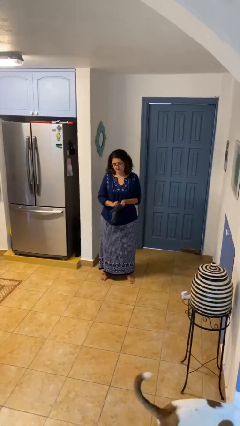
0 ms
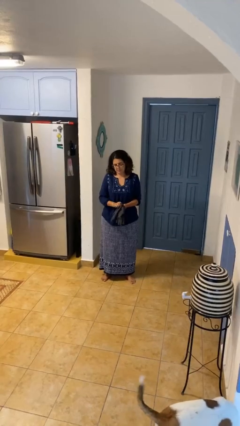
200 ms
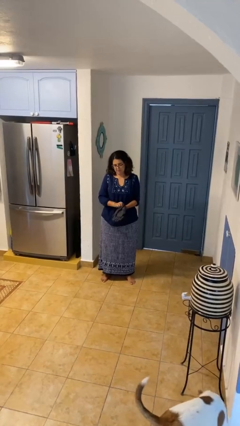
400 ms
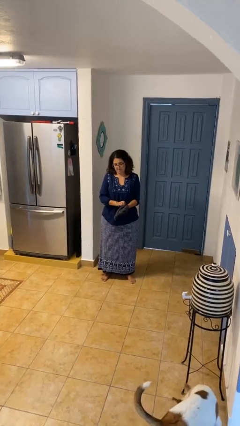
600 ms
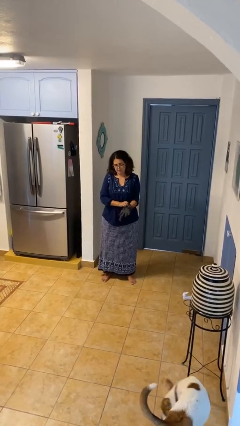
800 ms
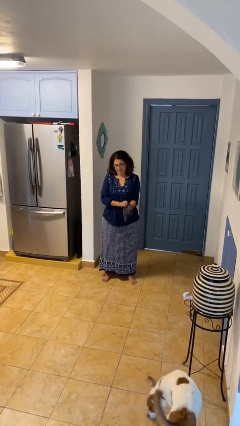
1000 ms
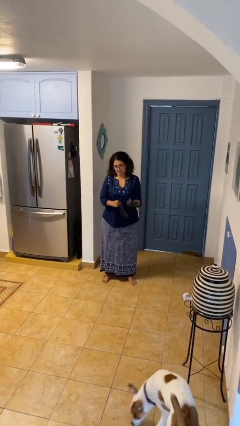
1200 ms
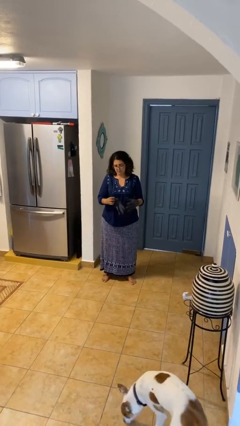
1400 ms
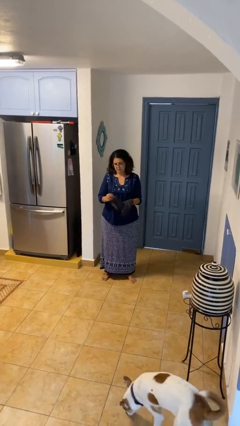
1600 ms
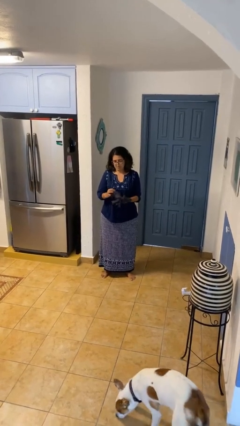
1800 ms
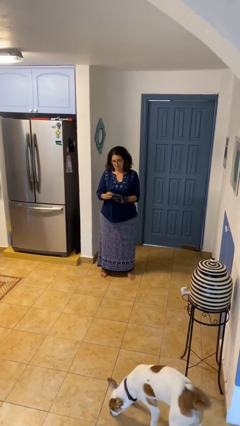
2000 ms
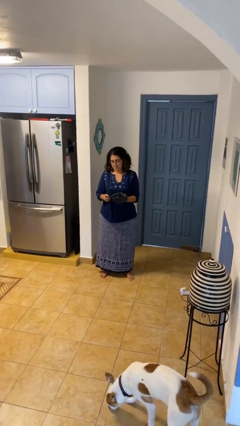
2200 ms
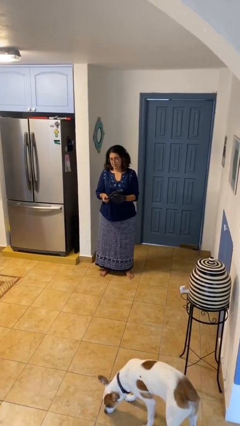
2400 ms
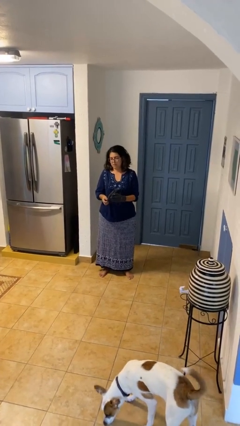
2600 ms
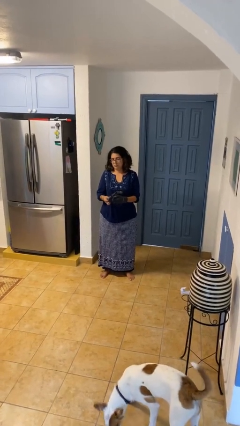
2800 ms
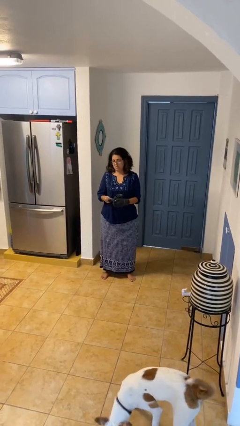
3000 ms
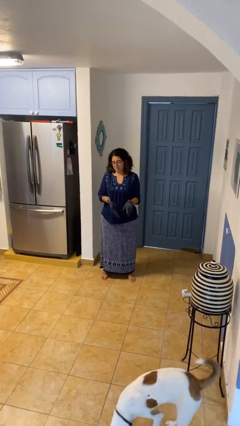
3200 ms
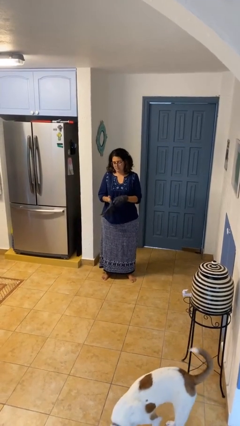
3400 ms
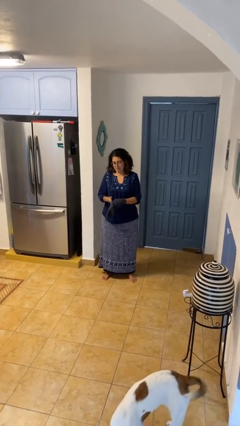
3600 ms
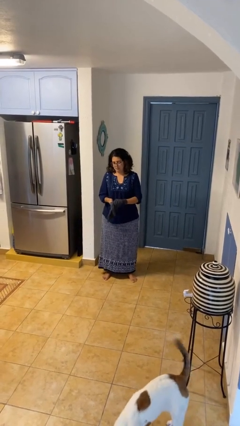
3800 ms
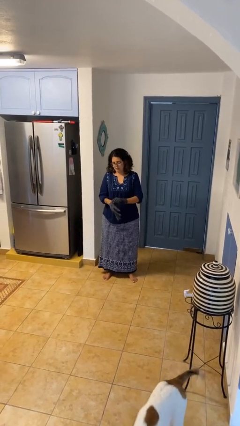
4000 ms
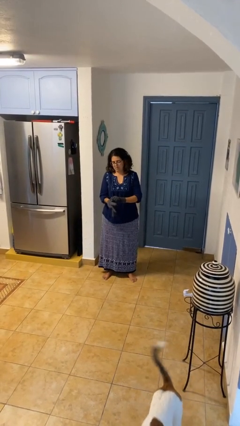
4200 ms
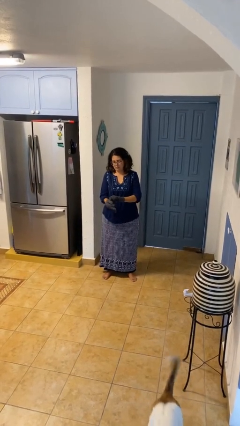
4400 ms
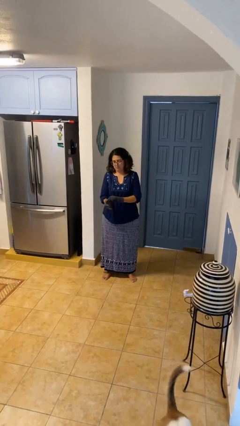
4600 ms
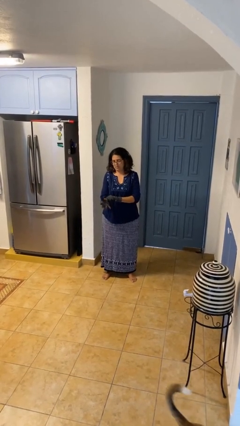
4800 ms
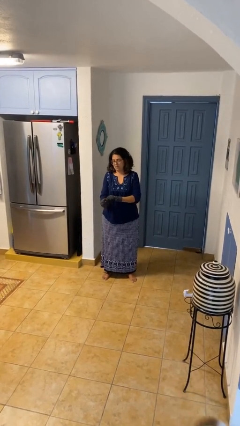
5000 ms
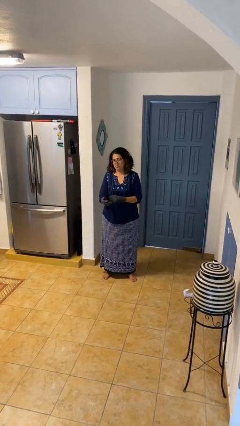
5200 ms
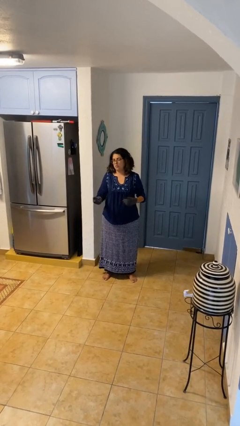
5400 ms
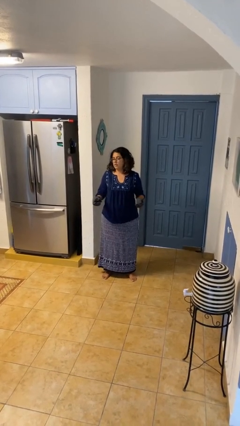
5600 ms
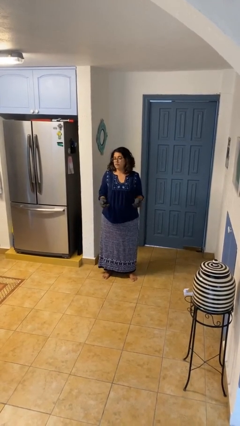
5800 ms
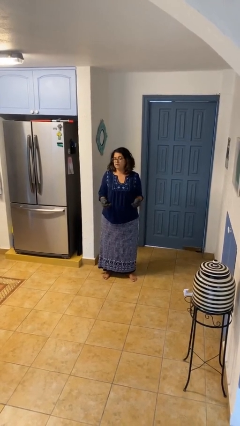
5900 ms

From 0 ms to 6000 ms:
person puts on gloves

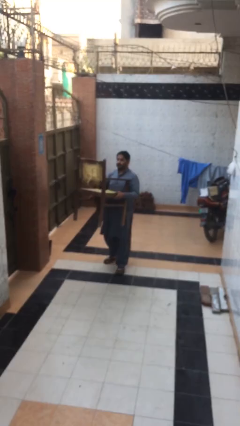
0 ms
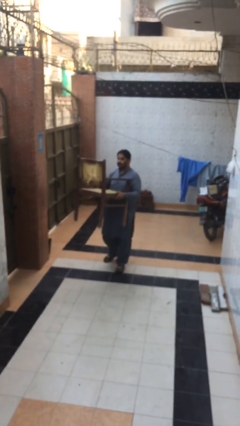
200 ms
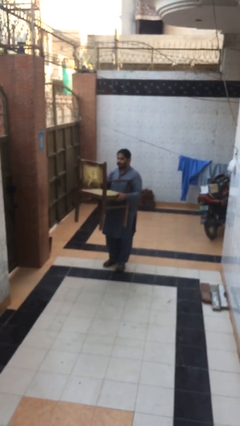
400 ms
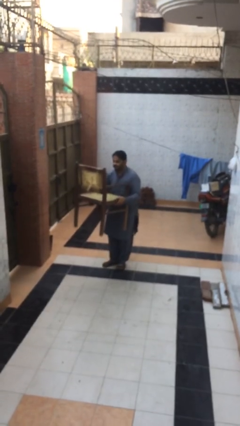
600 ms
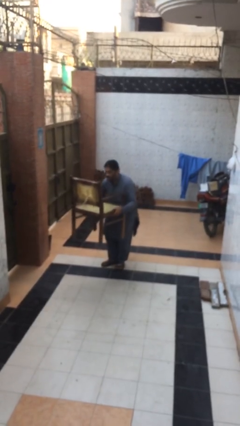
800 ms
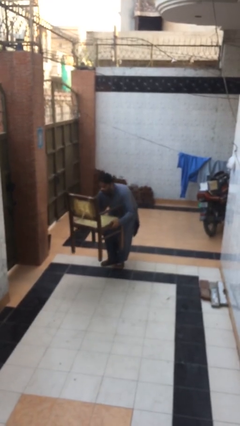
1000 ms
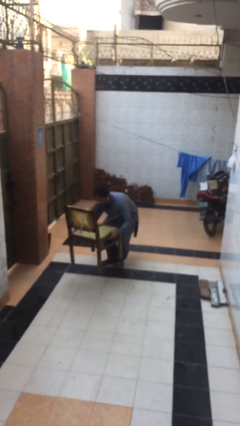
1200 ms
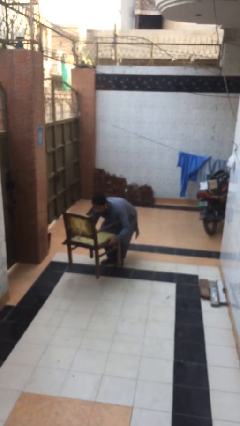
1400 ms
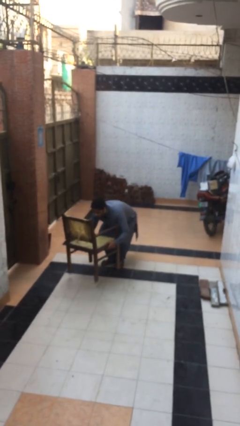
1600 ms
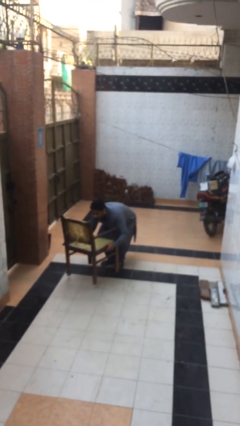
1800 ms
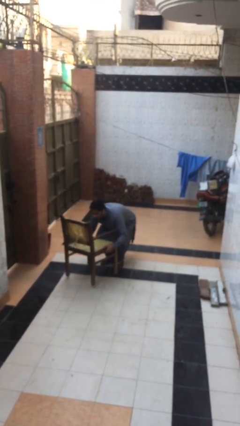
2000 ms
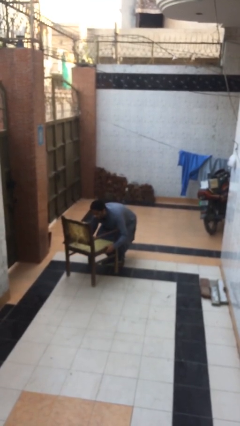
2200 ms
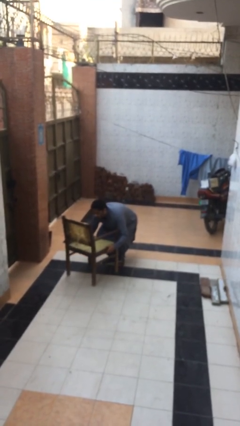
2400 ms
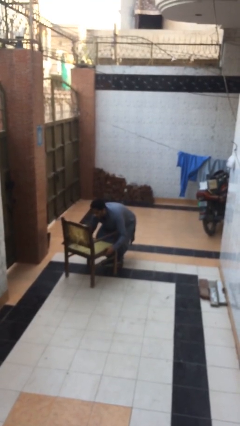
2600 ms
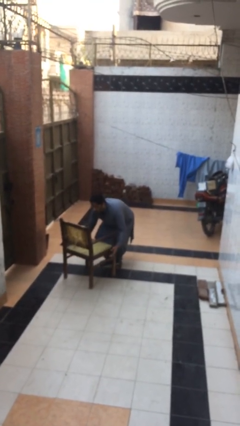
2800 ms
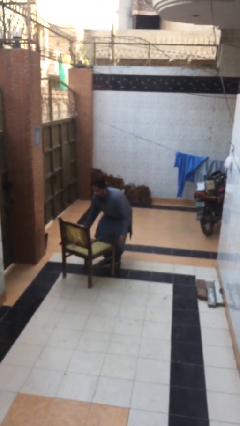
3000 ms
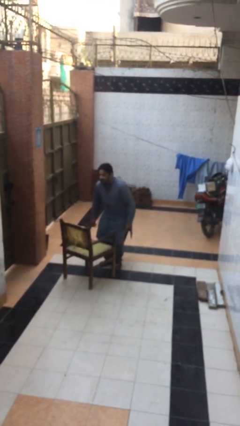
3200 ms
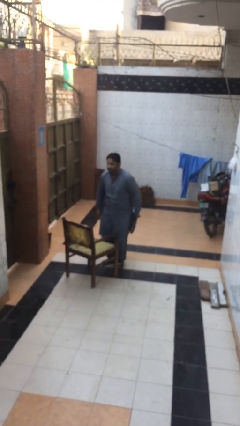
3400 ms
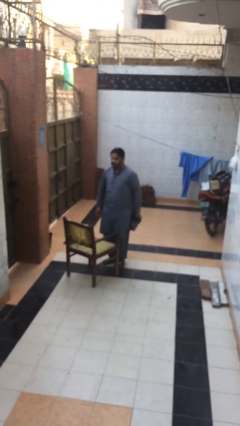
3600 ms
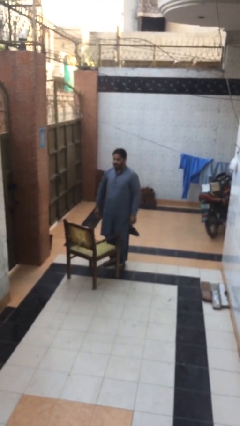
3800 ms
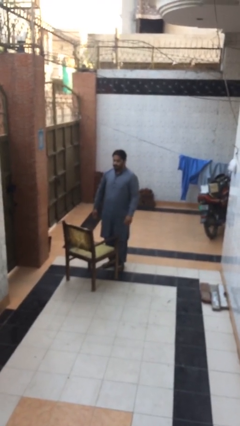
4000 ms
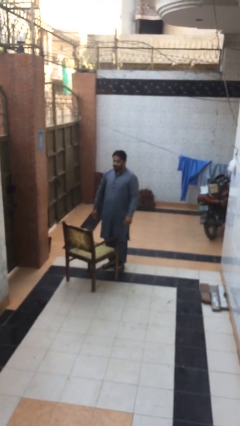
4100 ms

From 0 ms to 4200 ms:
person puts down object on floor

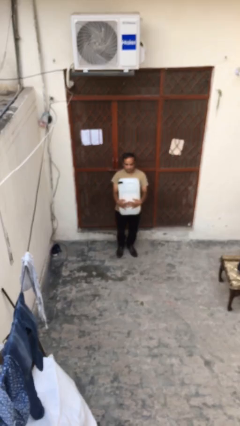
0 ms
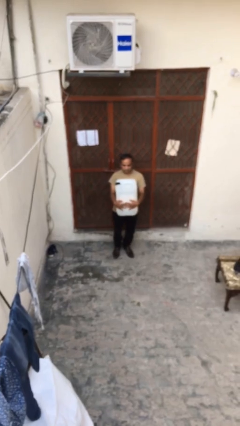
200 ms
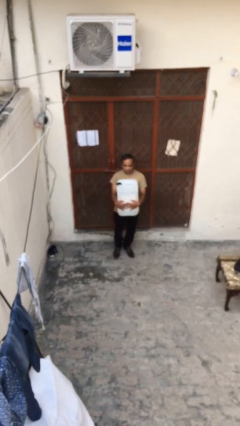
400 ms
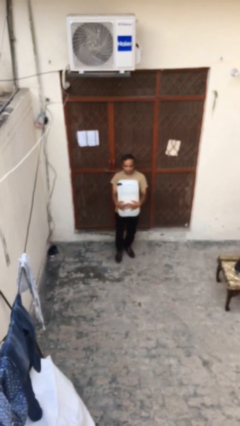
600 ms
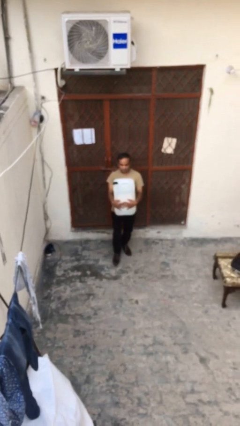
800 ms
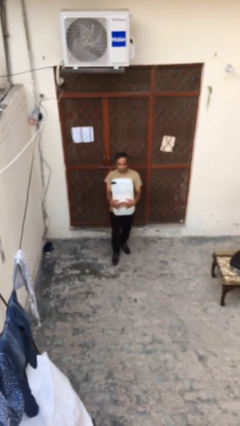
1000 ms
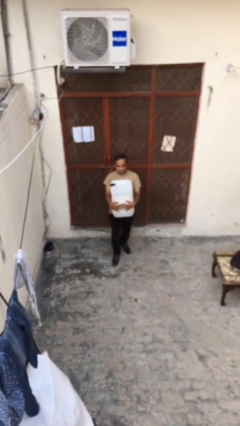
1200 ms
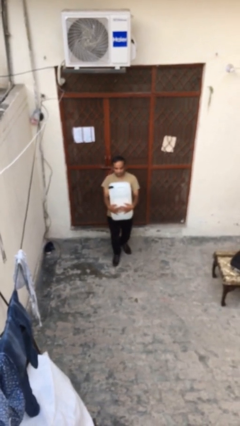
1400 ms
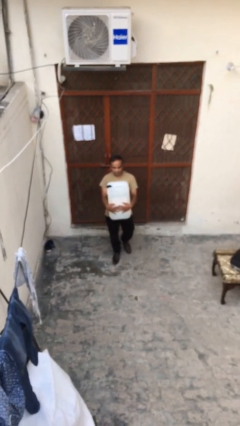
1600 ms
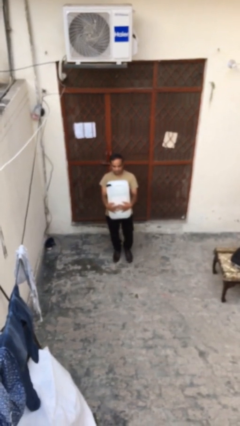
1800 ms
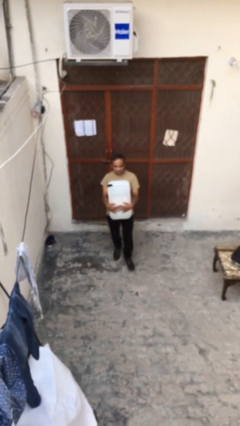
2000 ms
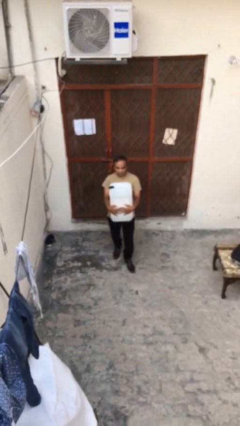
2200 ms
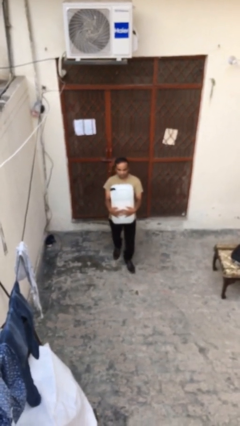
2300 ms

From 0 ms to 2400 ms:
person carries heavy object

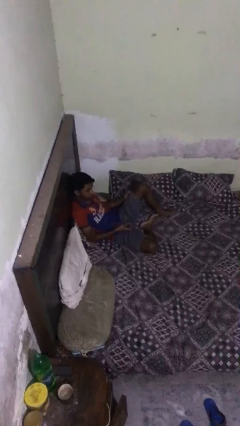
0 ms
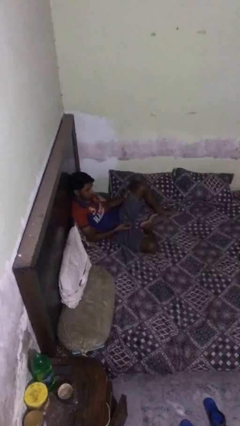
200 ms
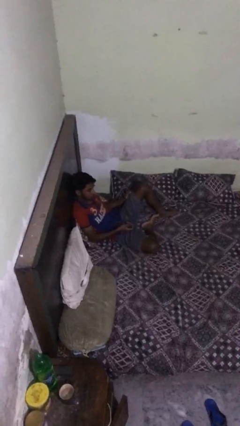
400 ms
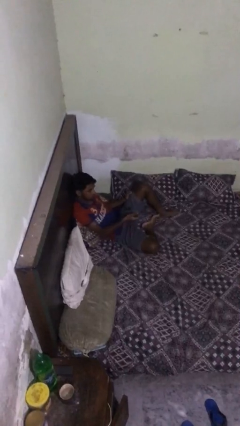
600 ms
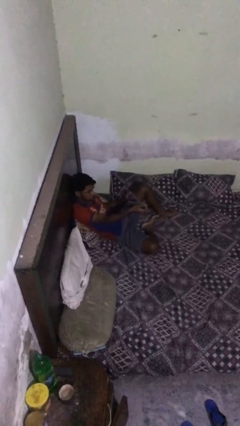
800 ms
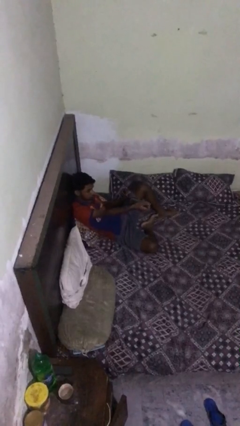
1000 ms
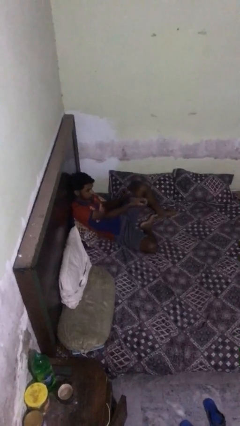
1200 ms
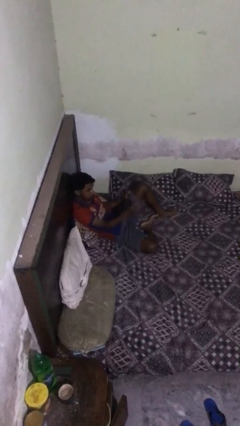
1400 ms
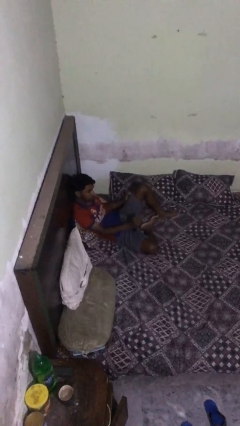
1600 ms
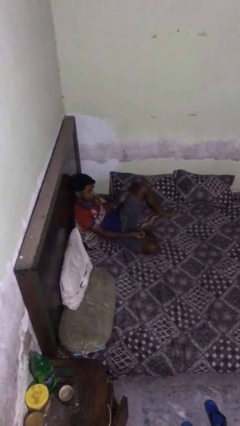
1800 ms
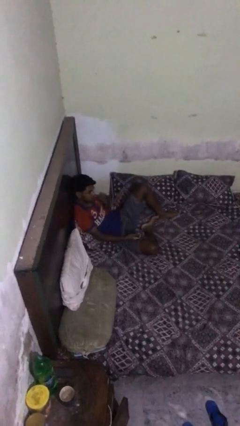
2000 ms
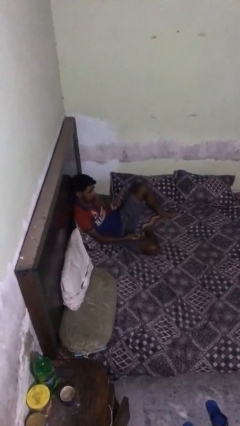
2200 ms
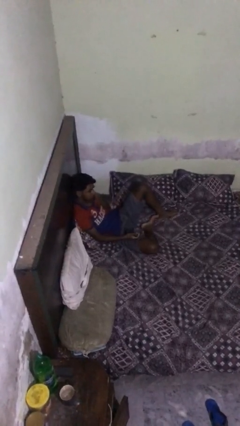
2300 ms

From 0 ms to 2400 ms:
person uses television remote

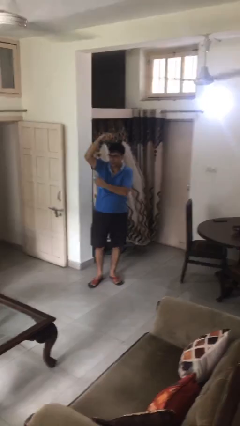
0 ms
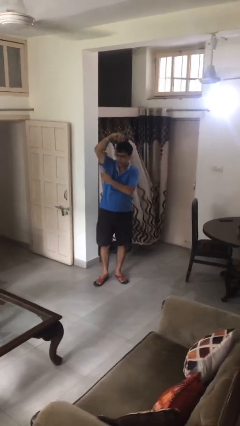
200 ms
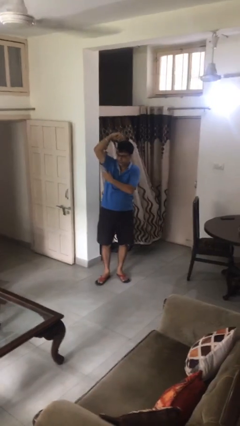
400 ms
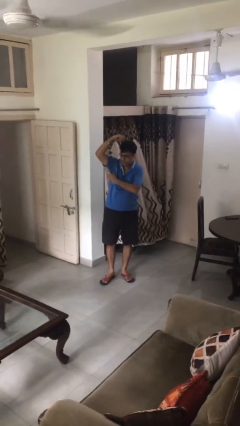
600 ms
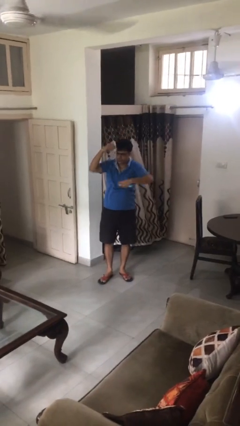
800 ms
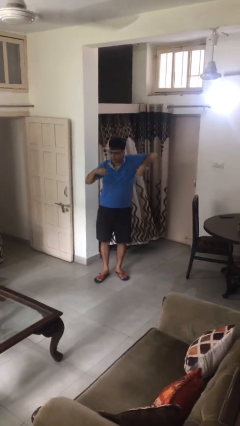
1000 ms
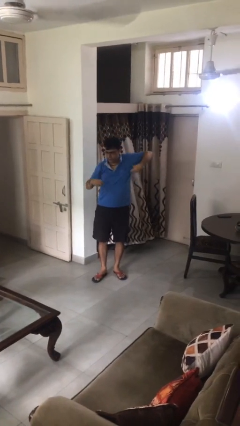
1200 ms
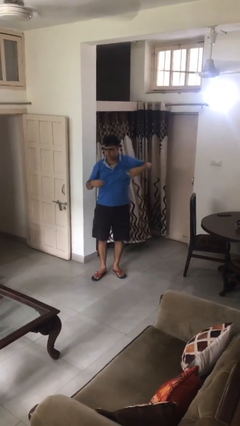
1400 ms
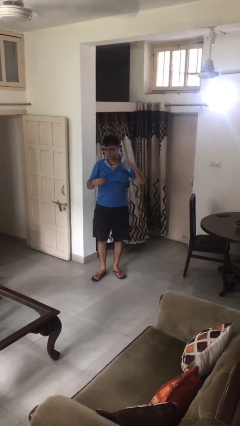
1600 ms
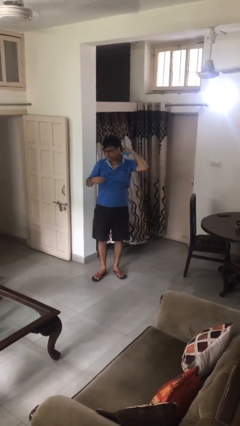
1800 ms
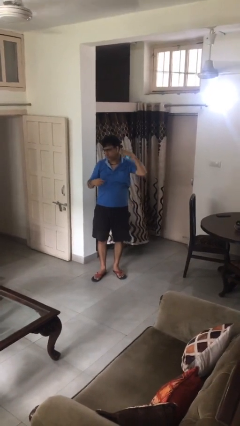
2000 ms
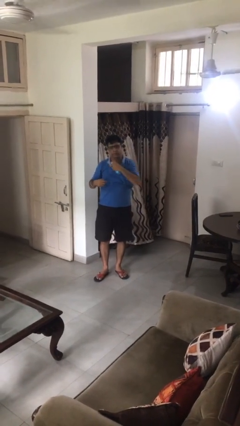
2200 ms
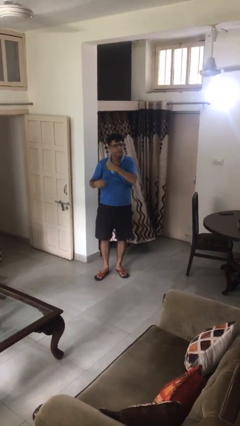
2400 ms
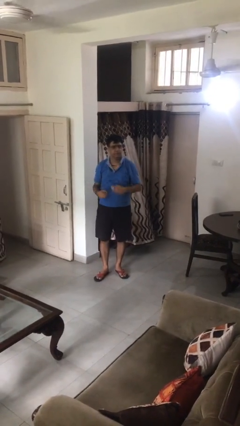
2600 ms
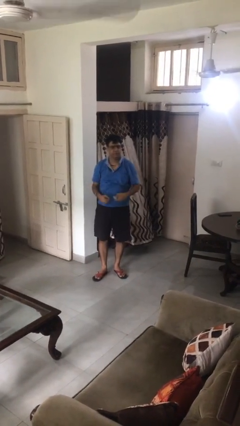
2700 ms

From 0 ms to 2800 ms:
person applies deodorant

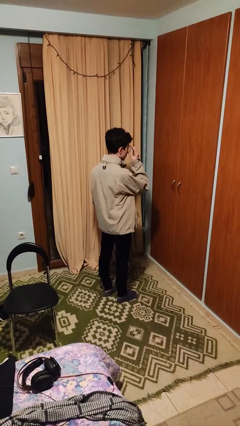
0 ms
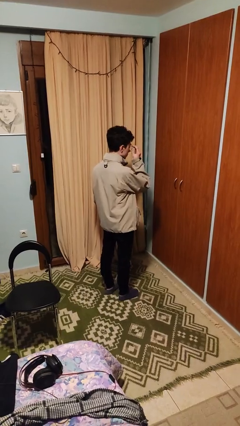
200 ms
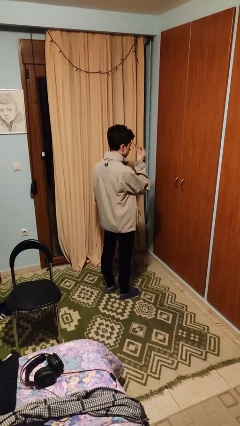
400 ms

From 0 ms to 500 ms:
person takes off glasses
